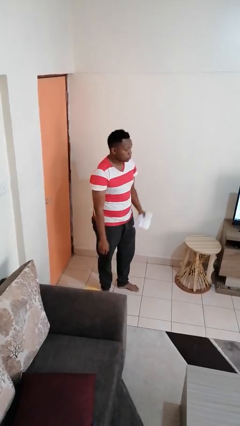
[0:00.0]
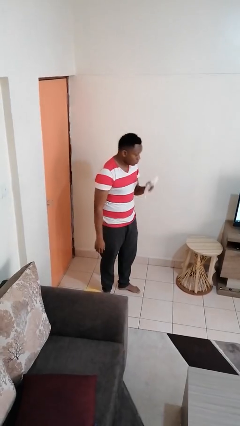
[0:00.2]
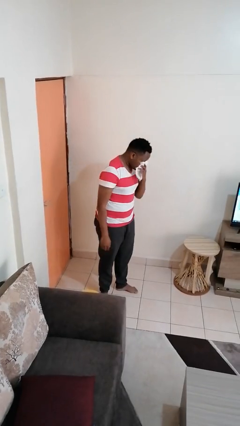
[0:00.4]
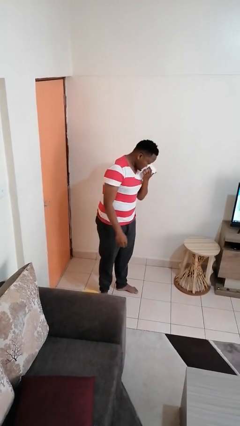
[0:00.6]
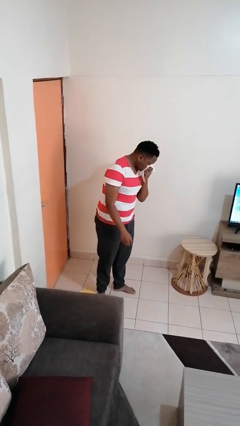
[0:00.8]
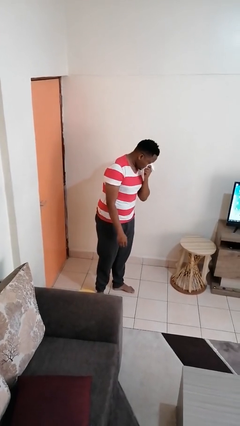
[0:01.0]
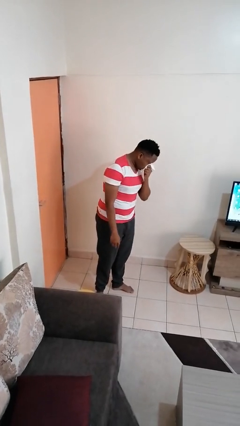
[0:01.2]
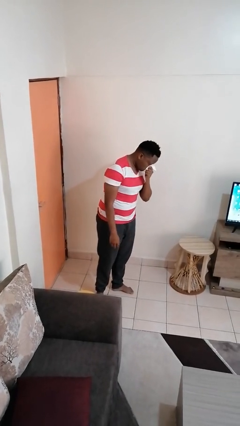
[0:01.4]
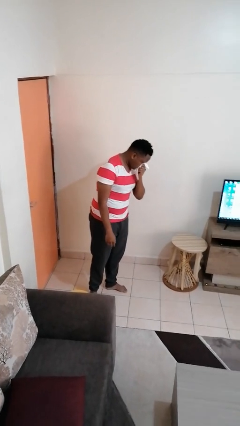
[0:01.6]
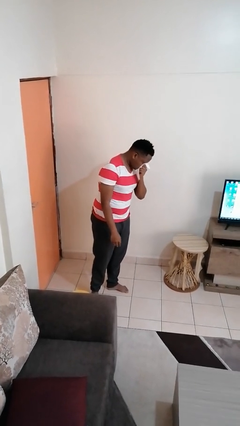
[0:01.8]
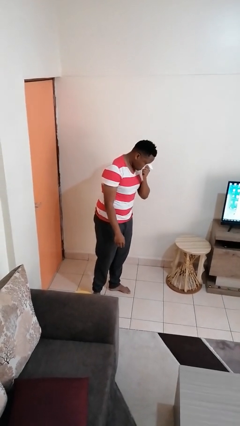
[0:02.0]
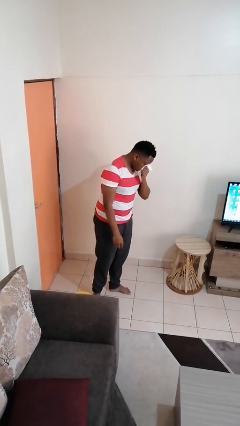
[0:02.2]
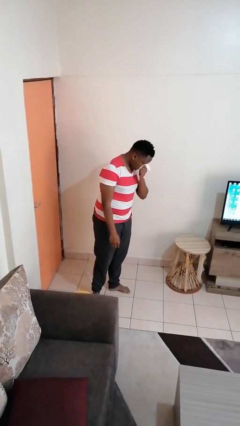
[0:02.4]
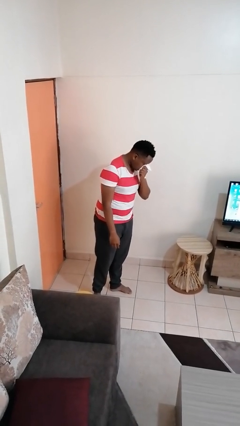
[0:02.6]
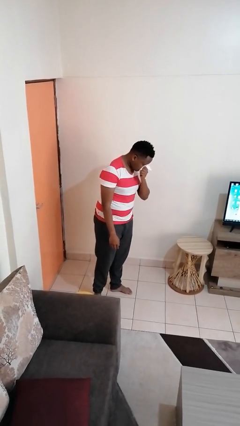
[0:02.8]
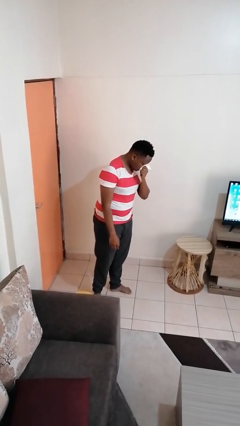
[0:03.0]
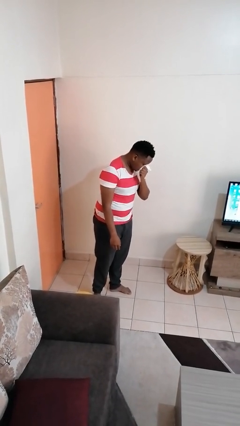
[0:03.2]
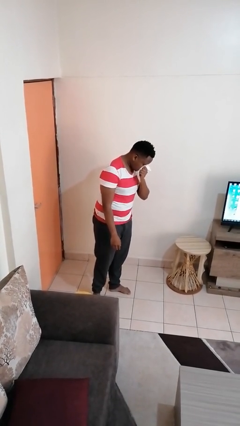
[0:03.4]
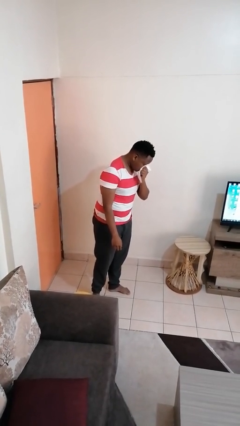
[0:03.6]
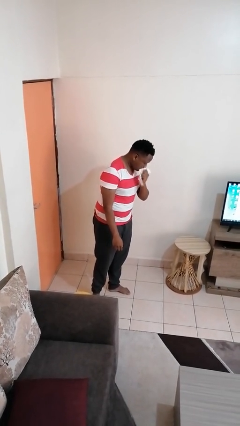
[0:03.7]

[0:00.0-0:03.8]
person blows nose

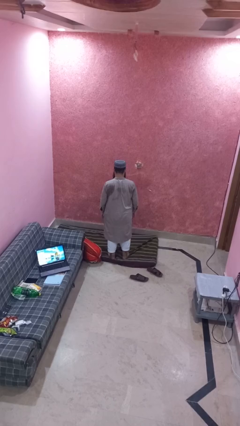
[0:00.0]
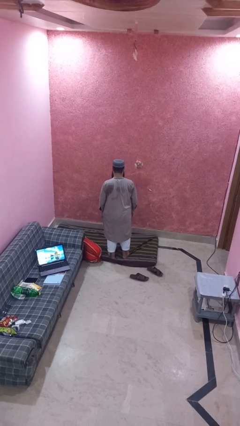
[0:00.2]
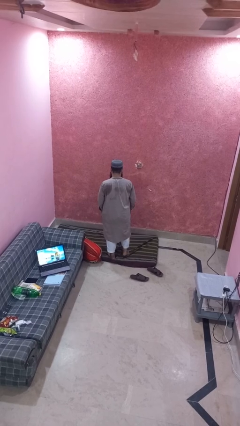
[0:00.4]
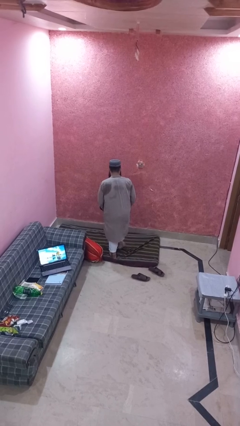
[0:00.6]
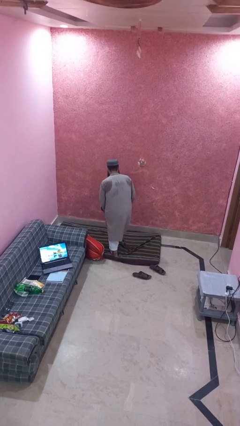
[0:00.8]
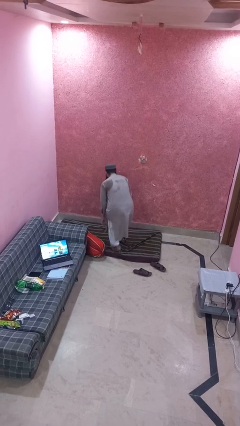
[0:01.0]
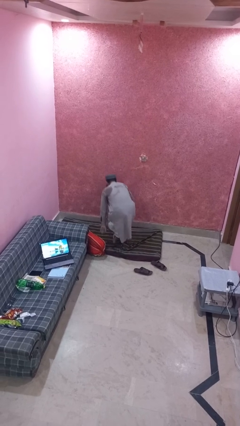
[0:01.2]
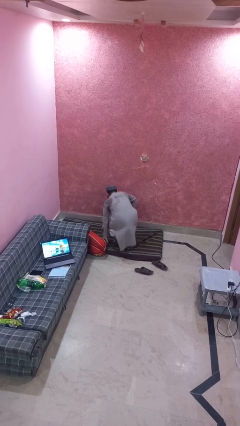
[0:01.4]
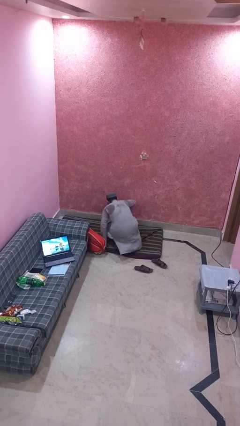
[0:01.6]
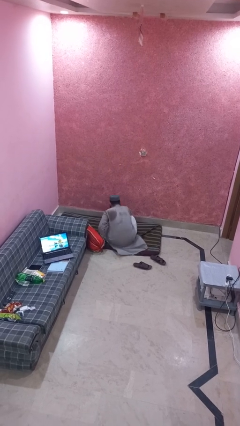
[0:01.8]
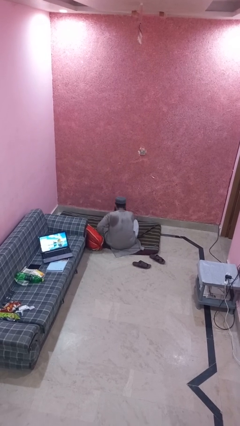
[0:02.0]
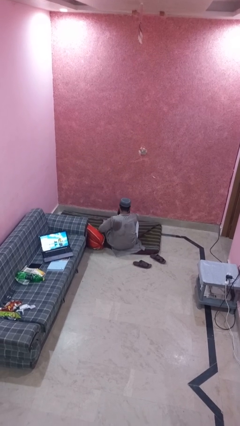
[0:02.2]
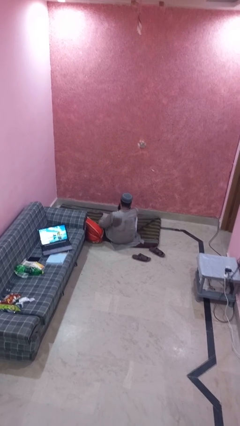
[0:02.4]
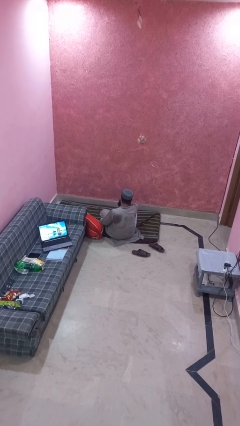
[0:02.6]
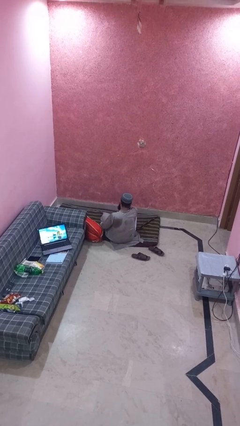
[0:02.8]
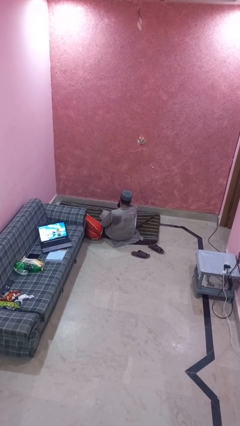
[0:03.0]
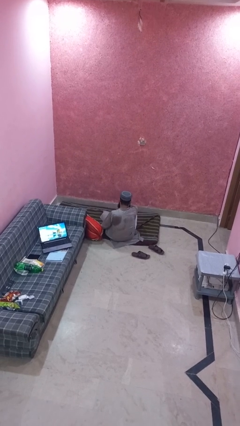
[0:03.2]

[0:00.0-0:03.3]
person sits crisscross

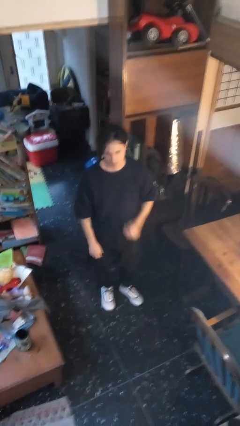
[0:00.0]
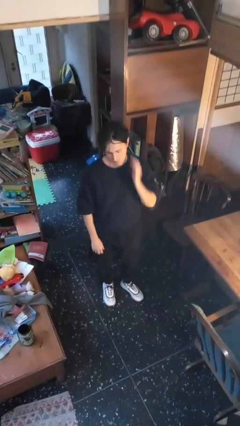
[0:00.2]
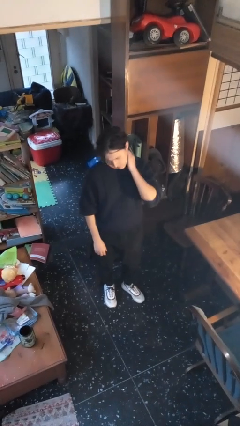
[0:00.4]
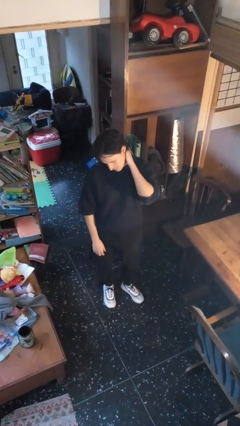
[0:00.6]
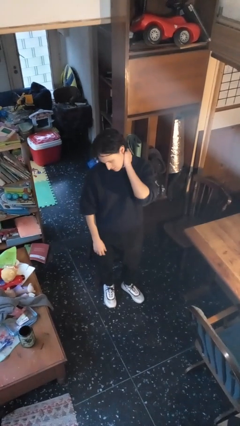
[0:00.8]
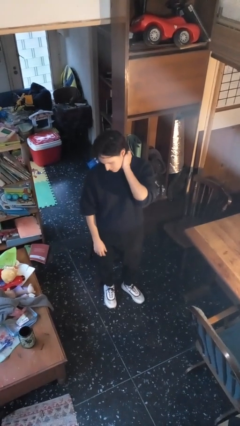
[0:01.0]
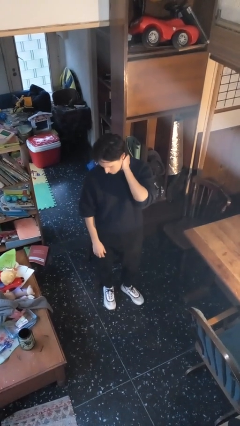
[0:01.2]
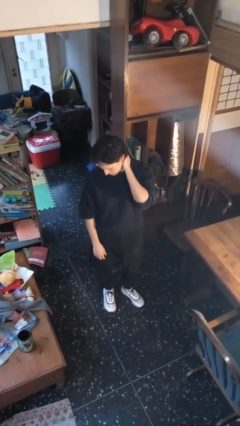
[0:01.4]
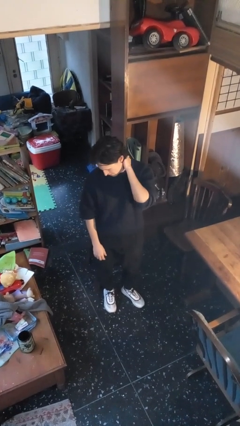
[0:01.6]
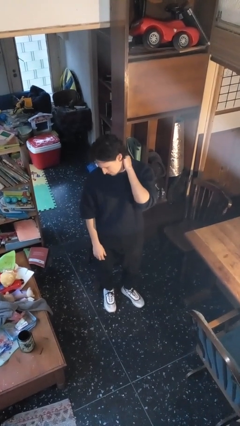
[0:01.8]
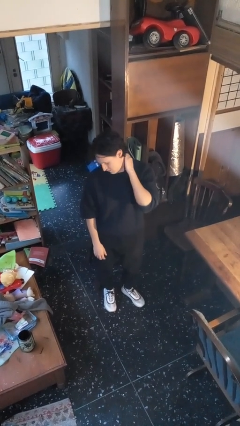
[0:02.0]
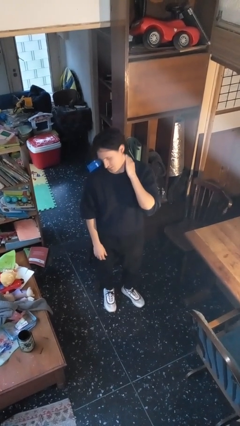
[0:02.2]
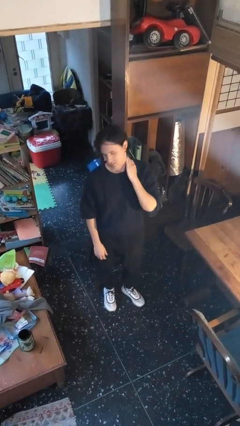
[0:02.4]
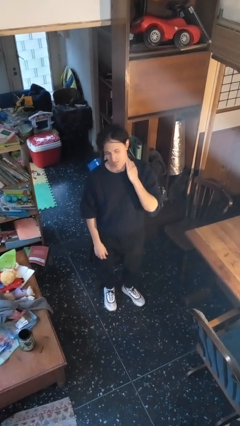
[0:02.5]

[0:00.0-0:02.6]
person rubs neck

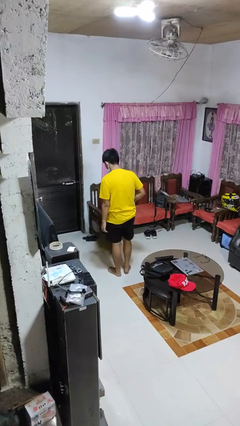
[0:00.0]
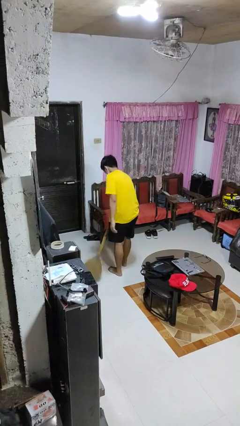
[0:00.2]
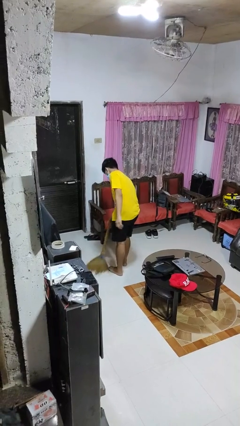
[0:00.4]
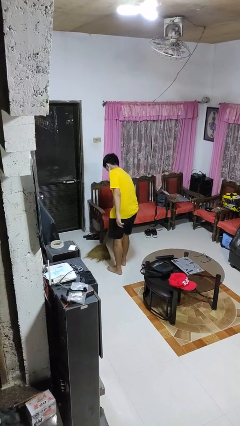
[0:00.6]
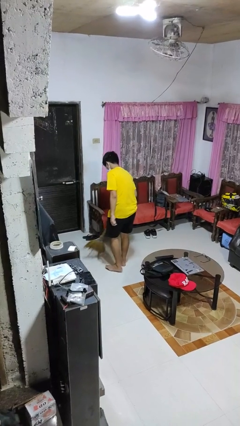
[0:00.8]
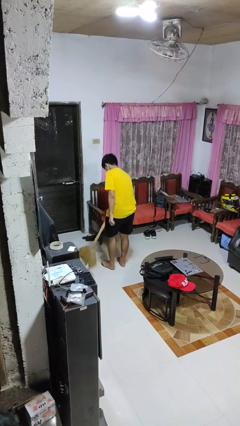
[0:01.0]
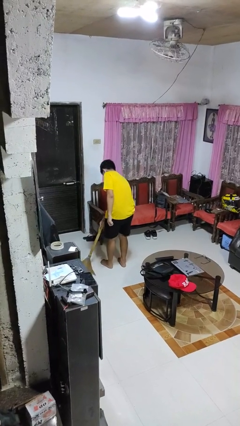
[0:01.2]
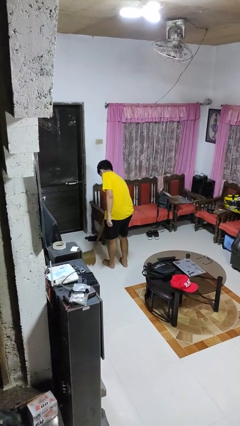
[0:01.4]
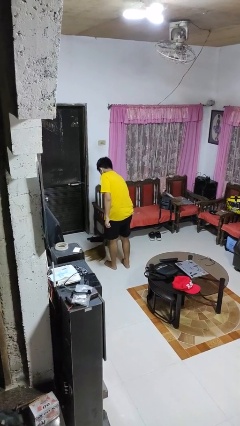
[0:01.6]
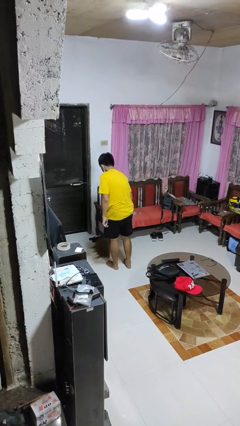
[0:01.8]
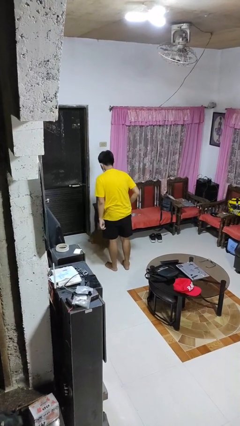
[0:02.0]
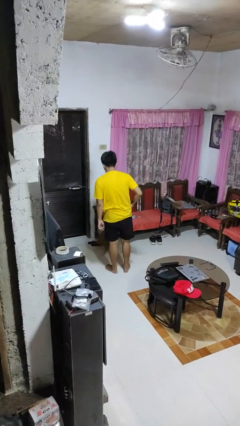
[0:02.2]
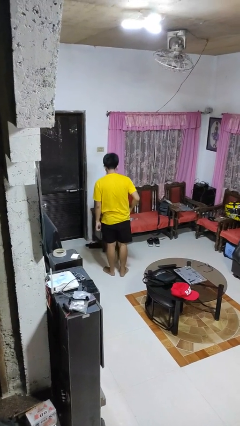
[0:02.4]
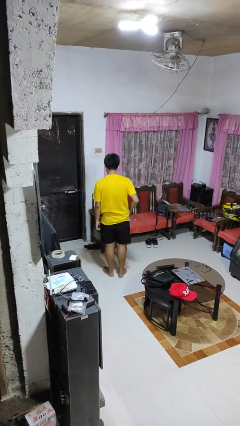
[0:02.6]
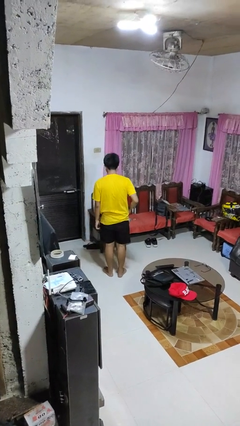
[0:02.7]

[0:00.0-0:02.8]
person sweeps floor

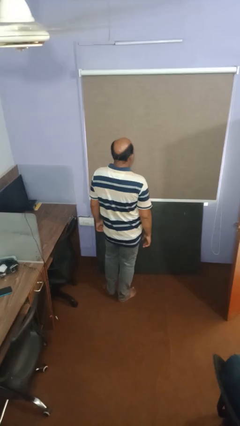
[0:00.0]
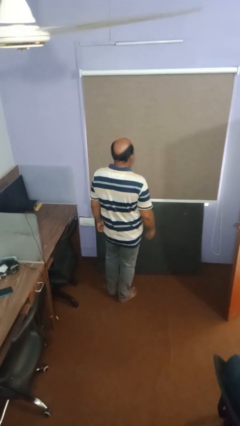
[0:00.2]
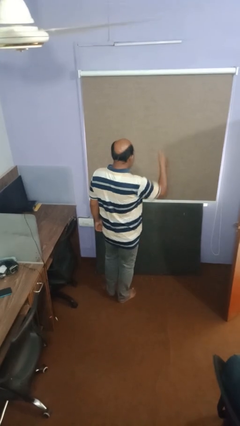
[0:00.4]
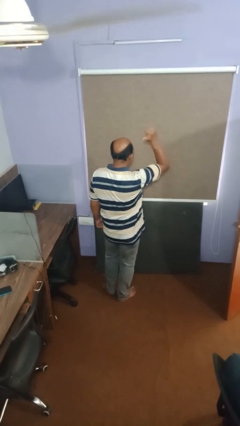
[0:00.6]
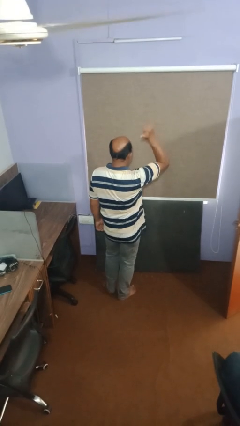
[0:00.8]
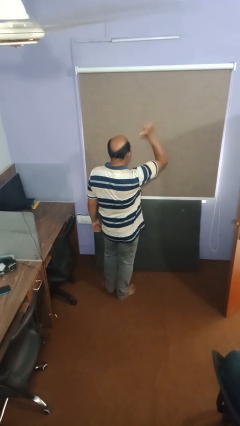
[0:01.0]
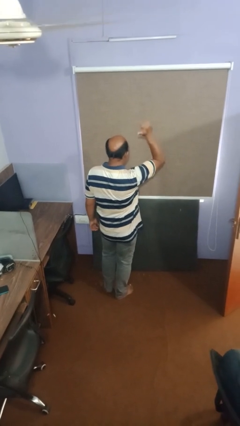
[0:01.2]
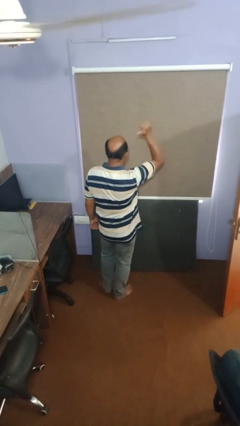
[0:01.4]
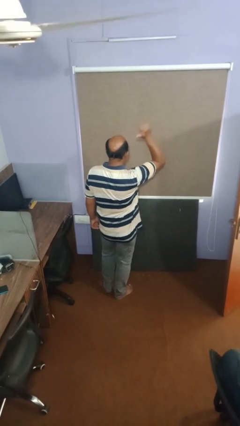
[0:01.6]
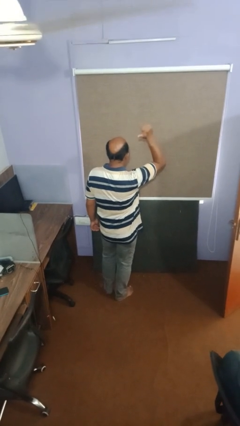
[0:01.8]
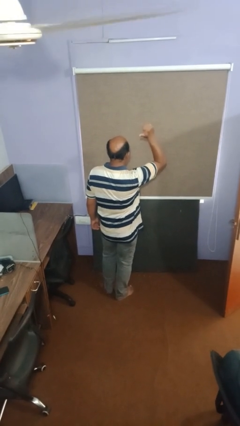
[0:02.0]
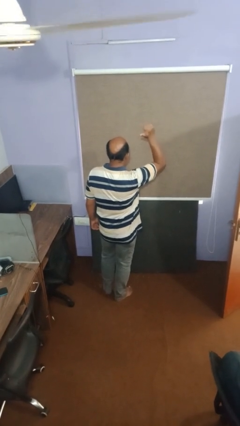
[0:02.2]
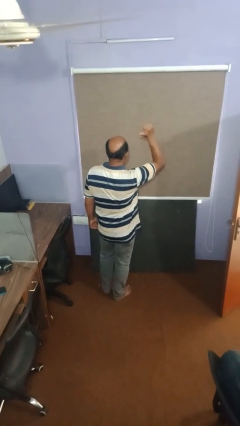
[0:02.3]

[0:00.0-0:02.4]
person gestures thumbs up

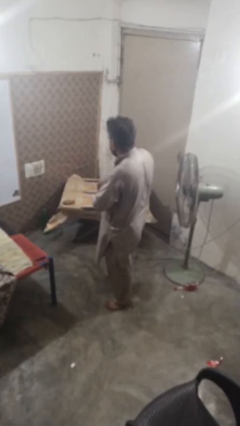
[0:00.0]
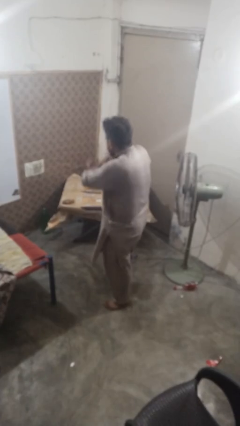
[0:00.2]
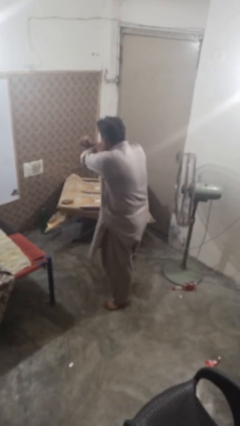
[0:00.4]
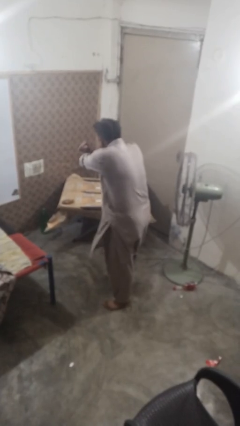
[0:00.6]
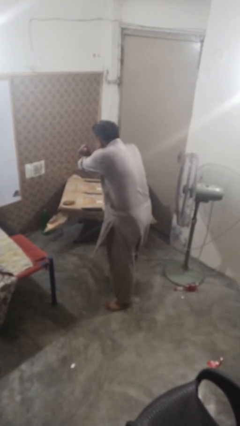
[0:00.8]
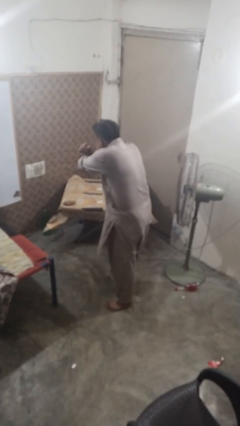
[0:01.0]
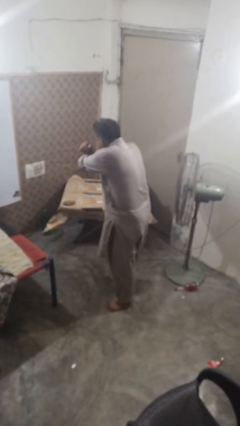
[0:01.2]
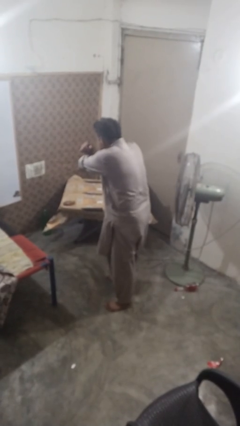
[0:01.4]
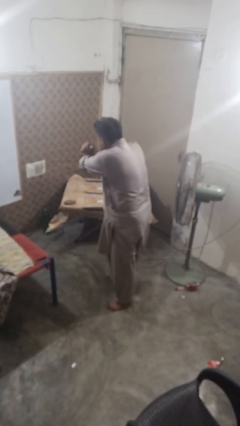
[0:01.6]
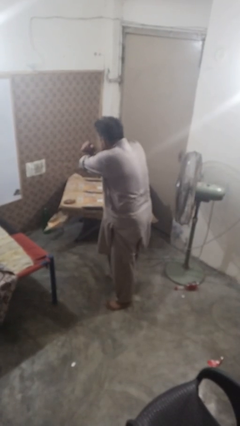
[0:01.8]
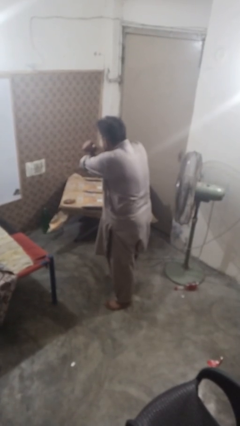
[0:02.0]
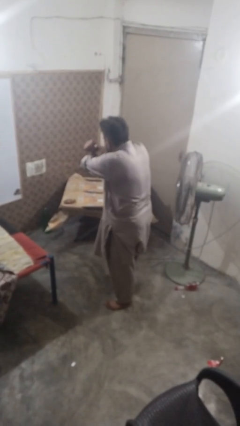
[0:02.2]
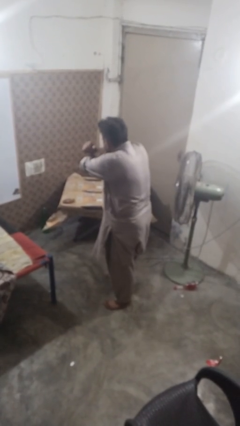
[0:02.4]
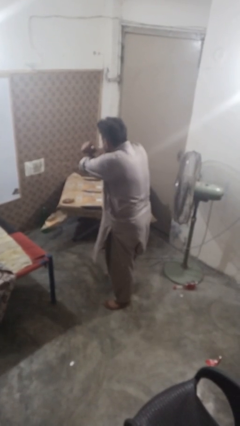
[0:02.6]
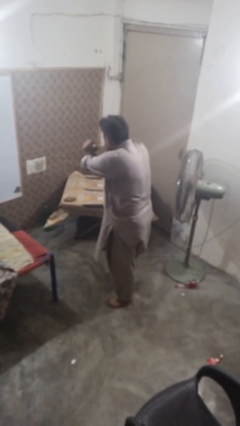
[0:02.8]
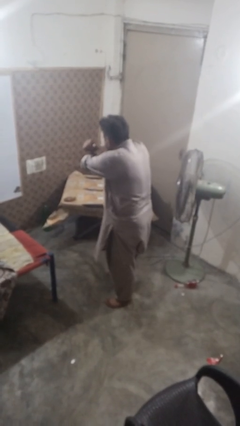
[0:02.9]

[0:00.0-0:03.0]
person karate chop
